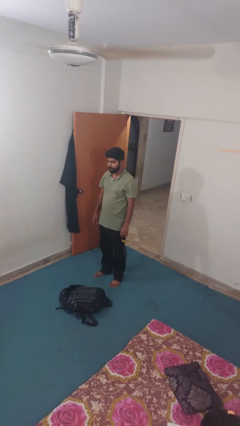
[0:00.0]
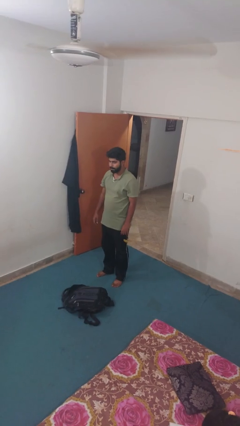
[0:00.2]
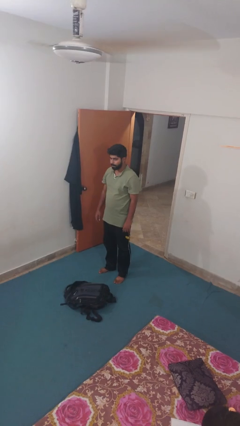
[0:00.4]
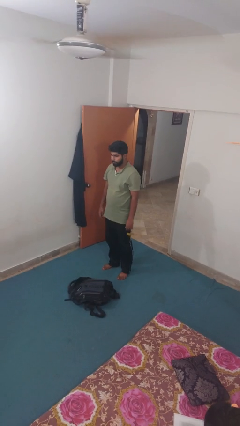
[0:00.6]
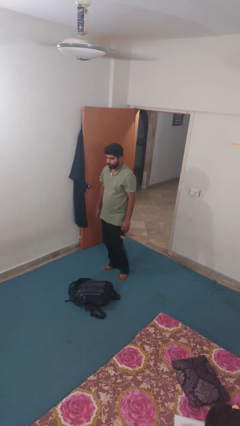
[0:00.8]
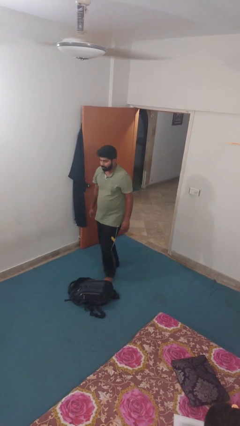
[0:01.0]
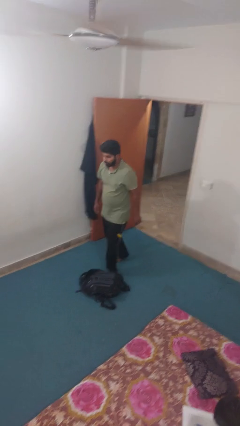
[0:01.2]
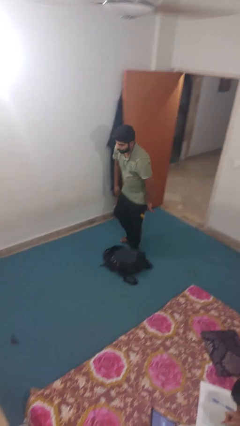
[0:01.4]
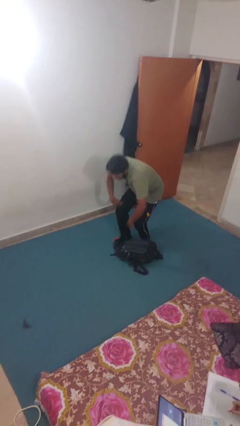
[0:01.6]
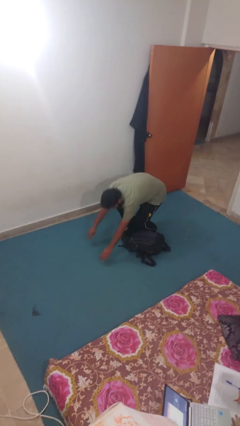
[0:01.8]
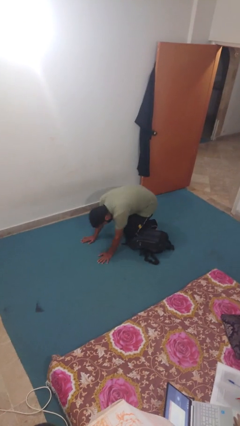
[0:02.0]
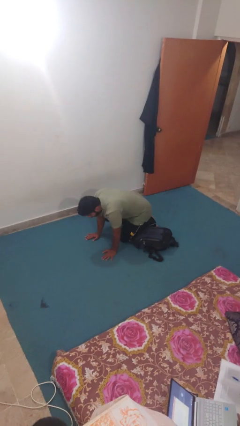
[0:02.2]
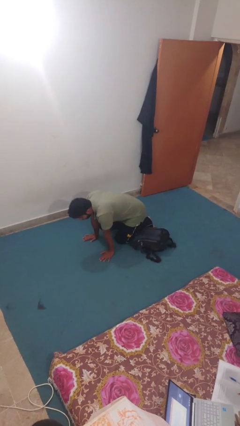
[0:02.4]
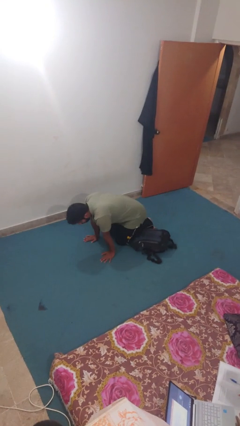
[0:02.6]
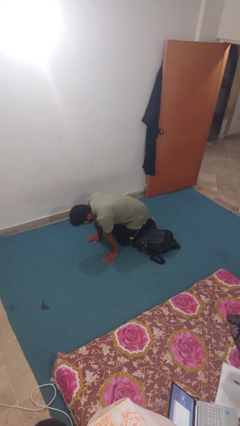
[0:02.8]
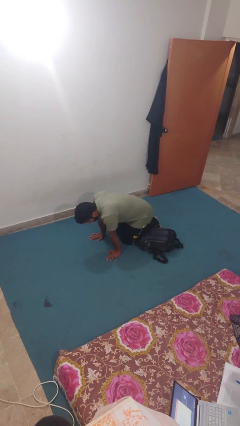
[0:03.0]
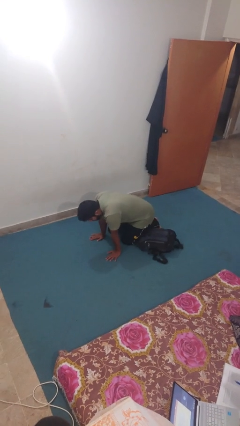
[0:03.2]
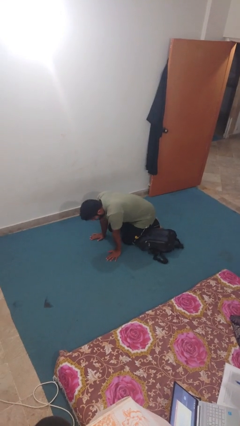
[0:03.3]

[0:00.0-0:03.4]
person trips on object on floor

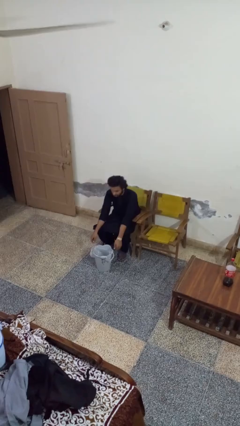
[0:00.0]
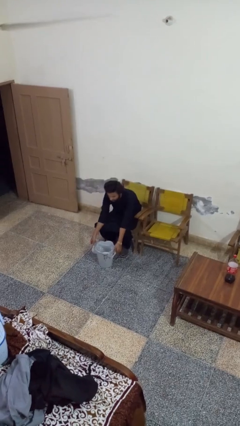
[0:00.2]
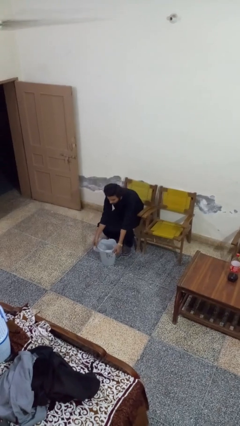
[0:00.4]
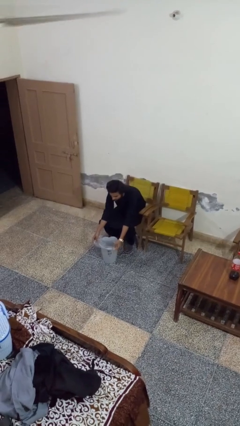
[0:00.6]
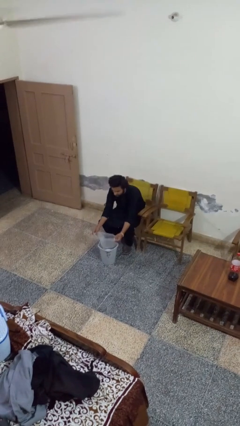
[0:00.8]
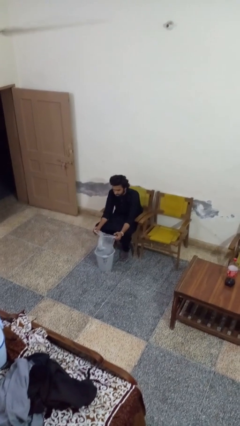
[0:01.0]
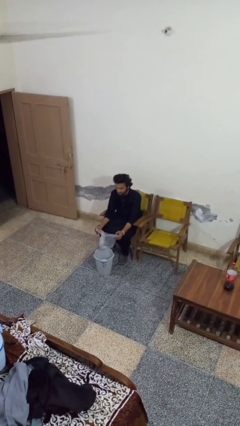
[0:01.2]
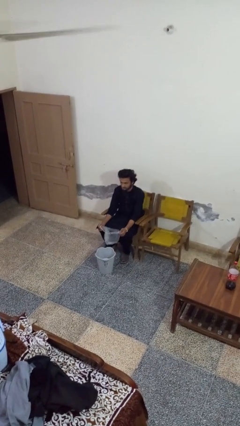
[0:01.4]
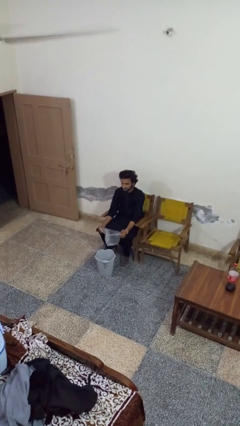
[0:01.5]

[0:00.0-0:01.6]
person removes trashbag from trashcan

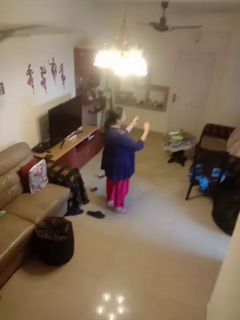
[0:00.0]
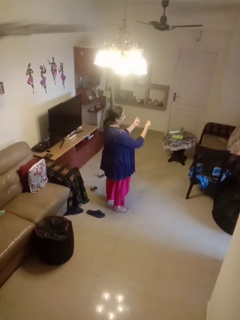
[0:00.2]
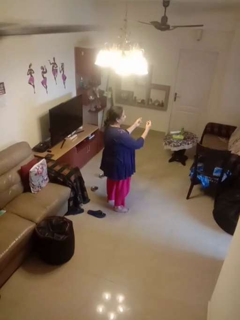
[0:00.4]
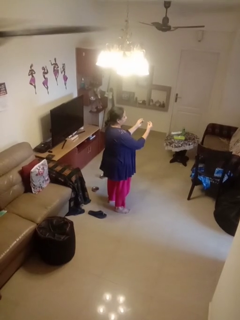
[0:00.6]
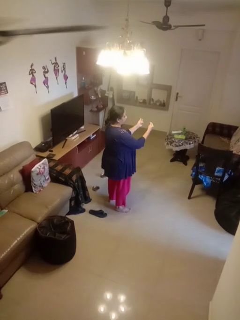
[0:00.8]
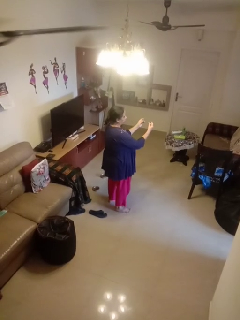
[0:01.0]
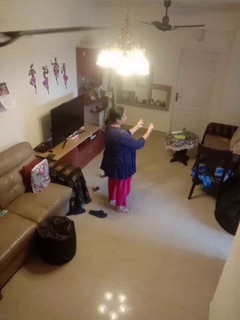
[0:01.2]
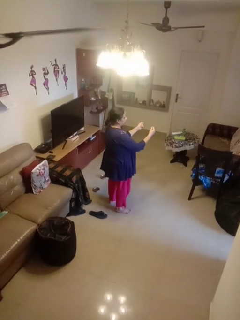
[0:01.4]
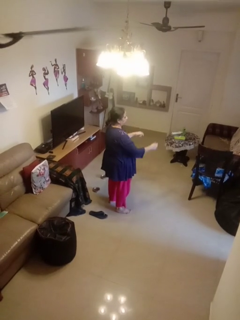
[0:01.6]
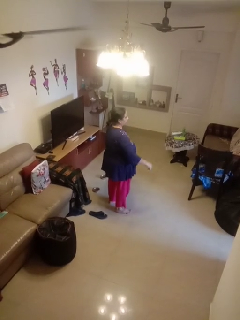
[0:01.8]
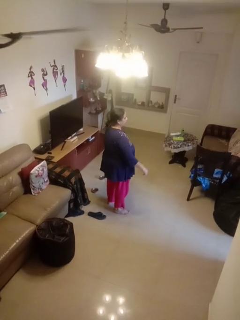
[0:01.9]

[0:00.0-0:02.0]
person snaps fingers

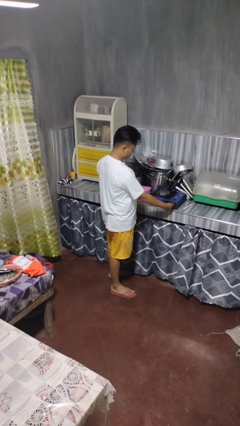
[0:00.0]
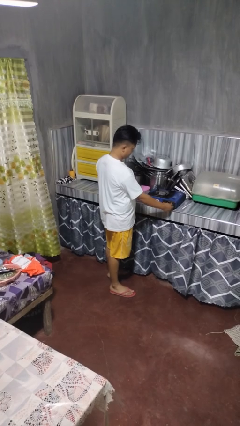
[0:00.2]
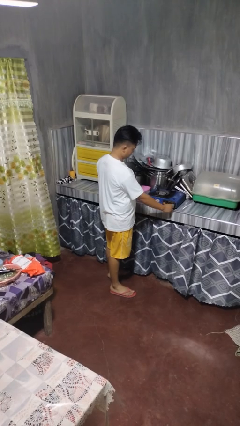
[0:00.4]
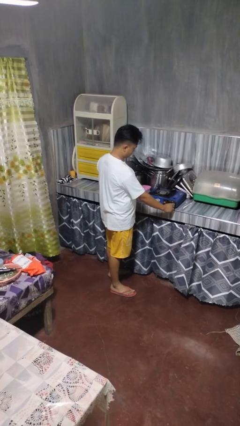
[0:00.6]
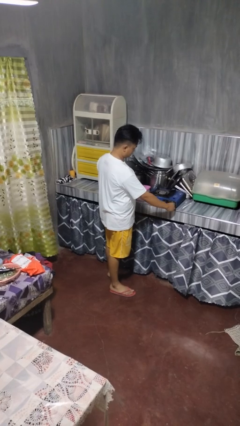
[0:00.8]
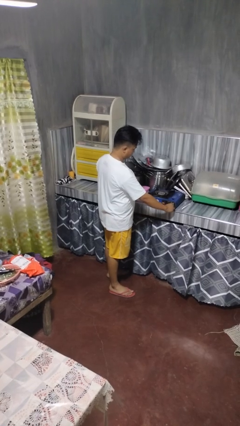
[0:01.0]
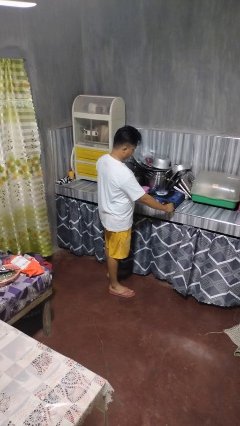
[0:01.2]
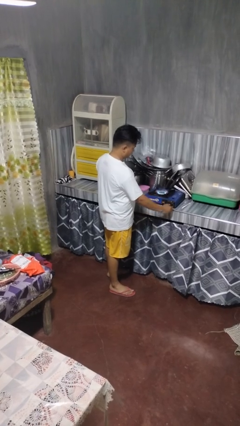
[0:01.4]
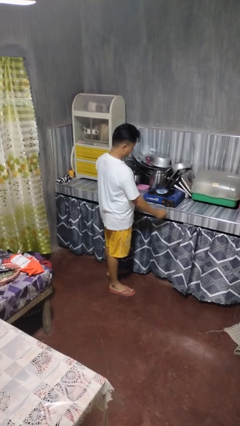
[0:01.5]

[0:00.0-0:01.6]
person turns on stovetop

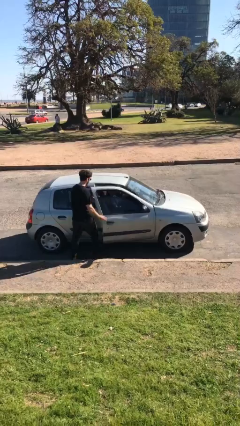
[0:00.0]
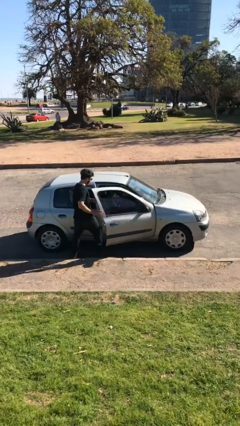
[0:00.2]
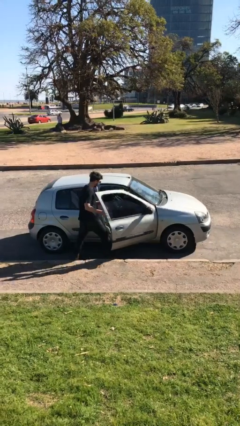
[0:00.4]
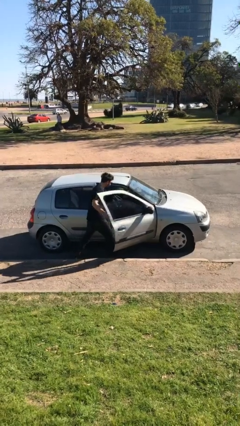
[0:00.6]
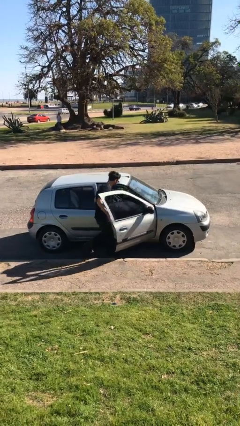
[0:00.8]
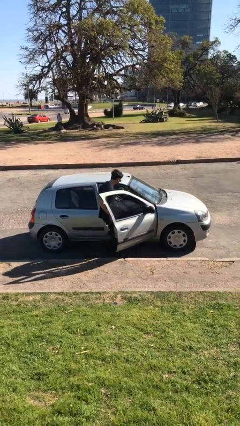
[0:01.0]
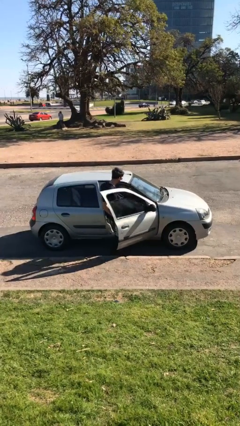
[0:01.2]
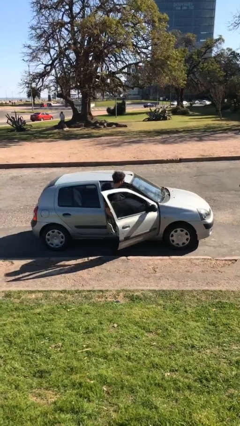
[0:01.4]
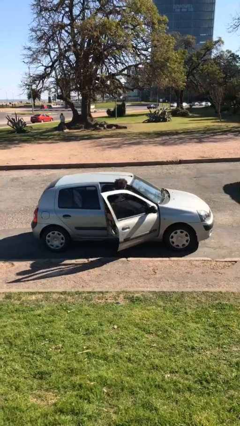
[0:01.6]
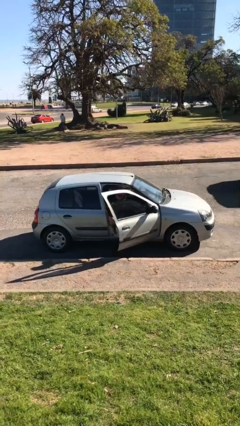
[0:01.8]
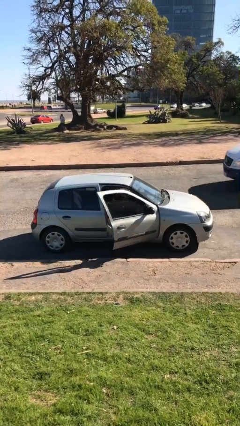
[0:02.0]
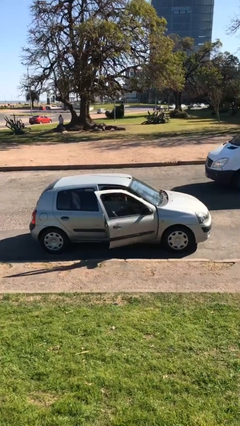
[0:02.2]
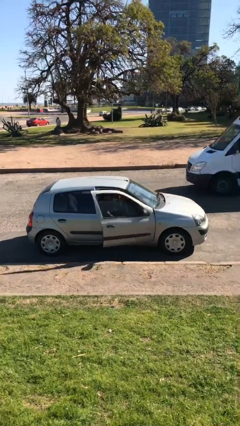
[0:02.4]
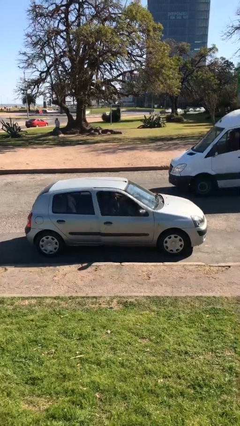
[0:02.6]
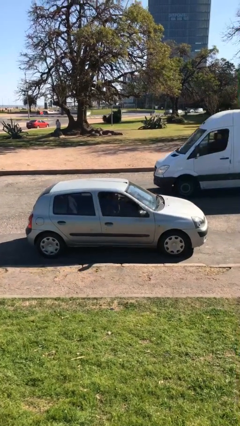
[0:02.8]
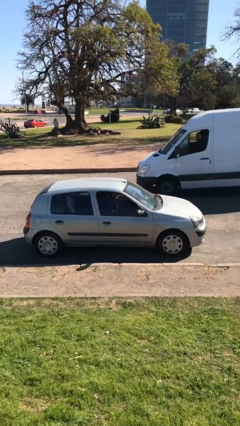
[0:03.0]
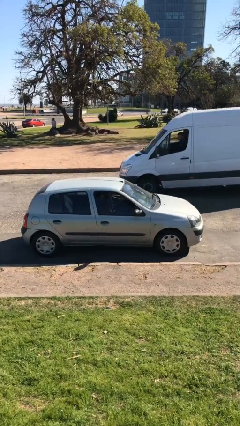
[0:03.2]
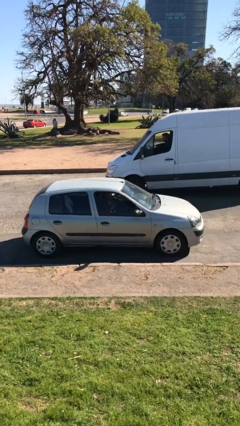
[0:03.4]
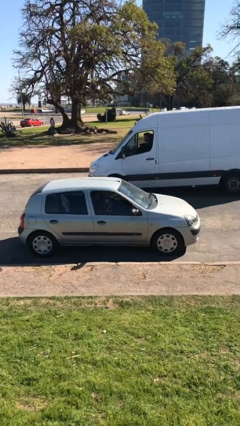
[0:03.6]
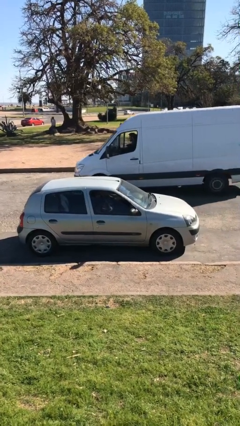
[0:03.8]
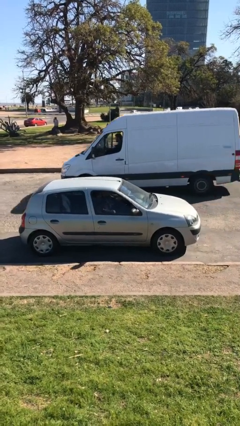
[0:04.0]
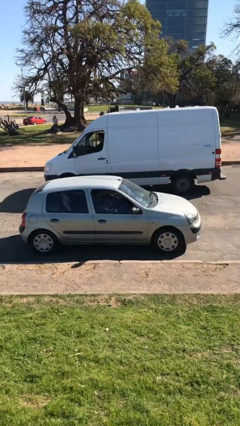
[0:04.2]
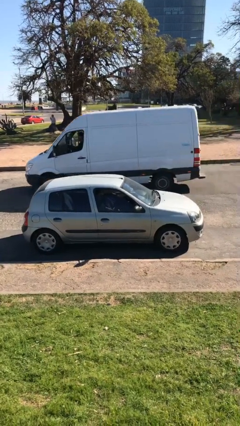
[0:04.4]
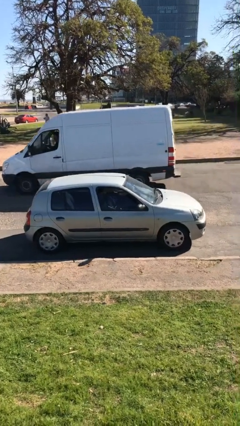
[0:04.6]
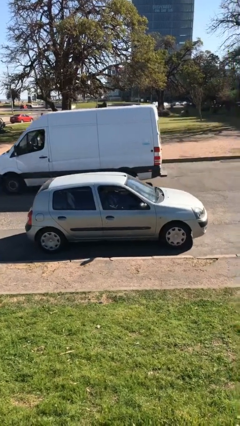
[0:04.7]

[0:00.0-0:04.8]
car picks up person

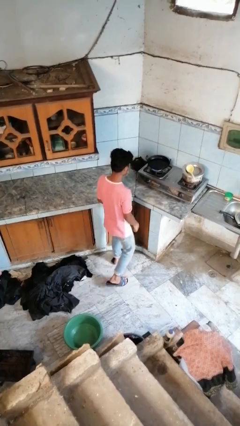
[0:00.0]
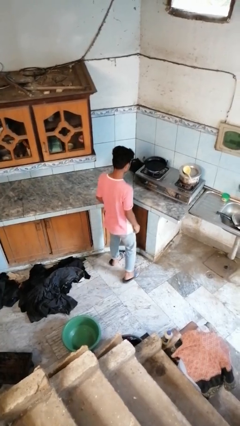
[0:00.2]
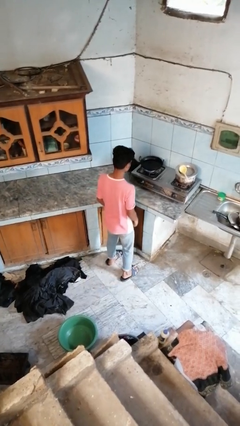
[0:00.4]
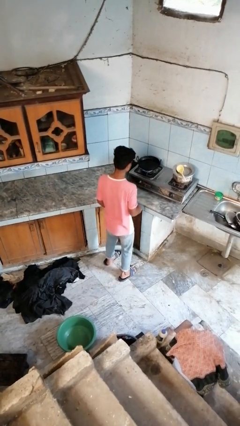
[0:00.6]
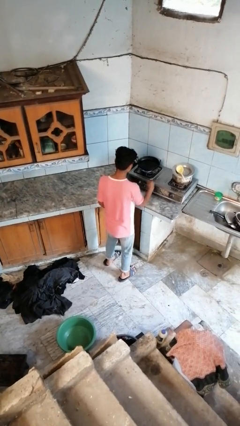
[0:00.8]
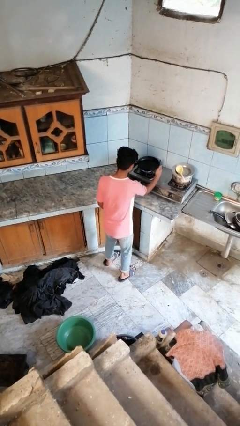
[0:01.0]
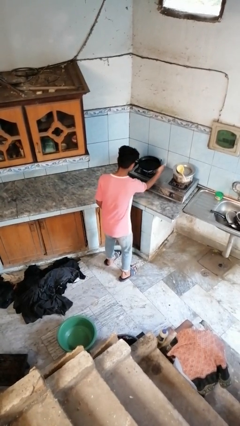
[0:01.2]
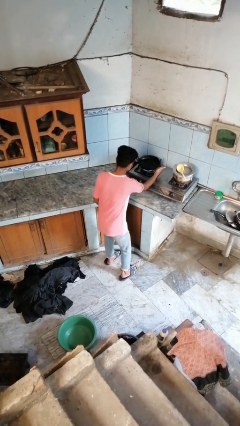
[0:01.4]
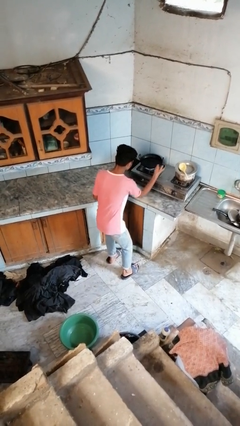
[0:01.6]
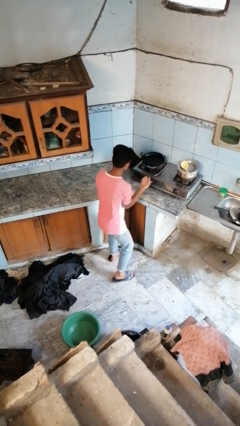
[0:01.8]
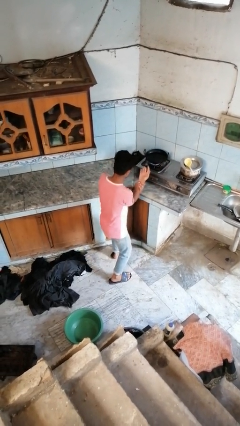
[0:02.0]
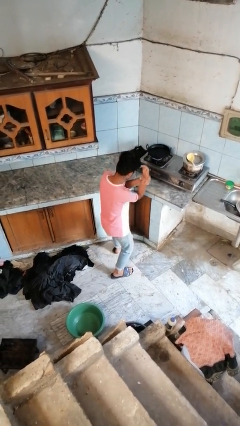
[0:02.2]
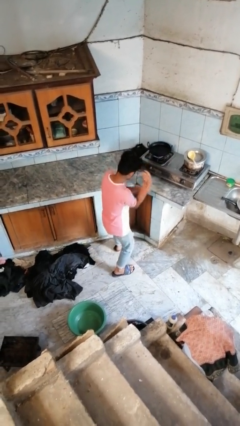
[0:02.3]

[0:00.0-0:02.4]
person burns hand

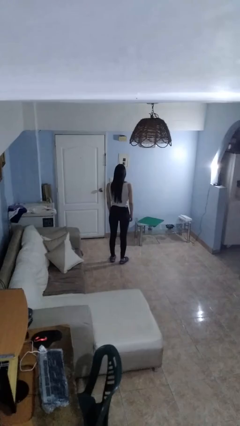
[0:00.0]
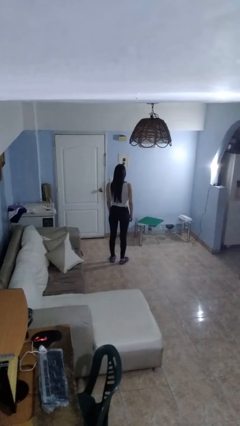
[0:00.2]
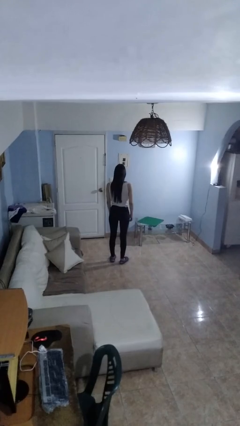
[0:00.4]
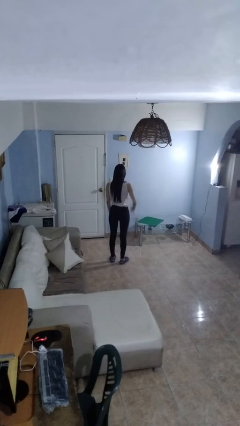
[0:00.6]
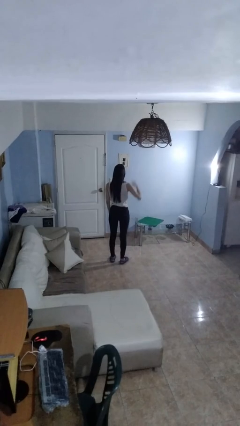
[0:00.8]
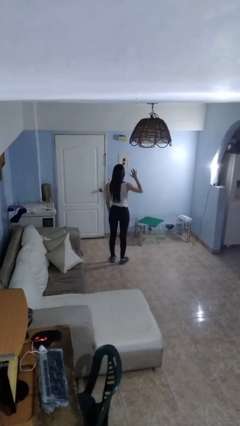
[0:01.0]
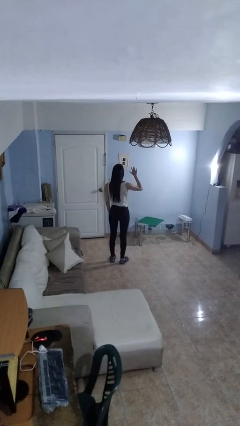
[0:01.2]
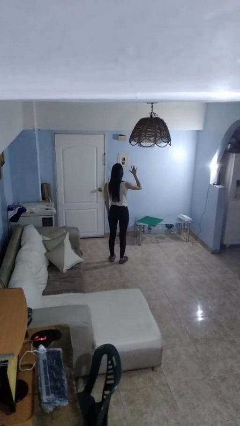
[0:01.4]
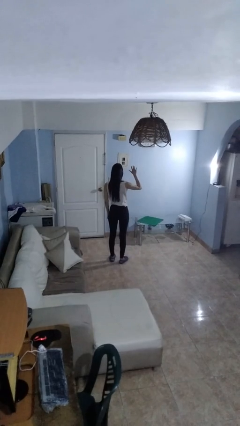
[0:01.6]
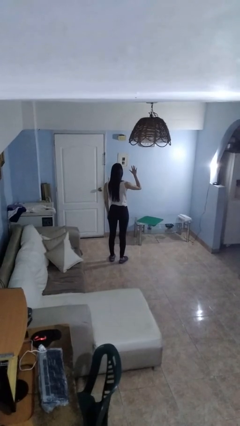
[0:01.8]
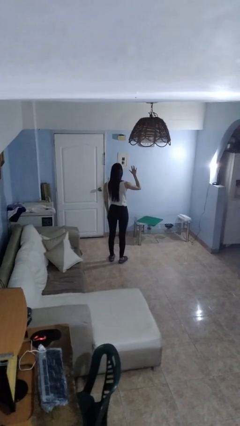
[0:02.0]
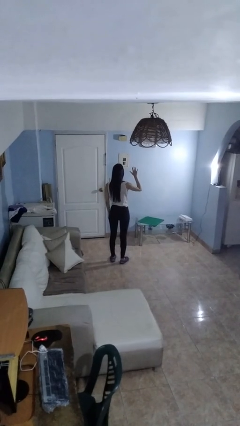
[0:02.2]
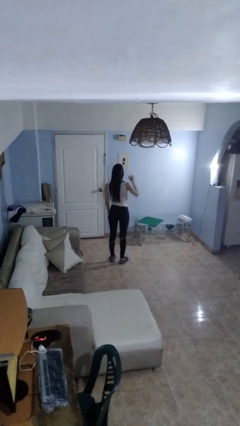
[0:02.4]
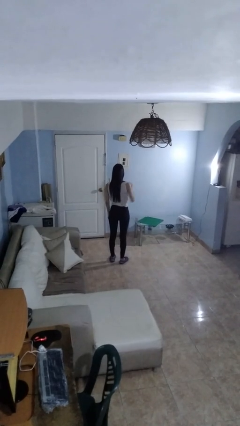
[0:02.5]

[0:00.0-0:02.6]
person gestures number five
